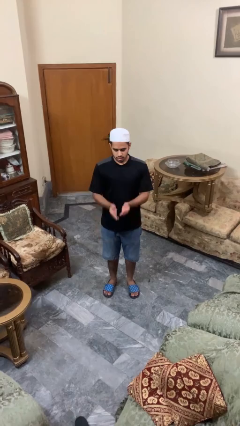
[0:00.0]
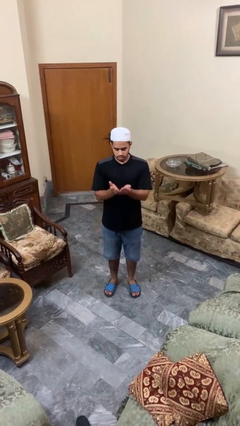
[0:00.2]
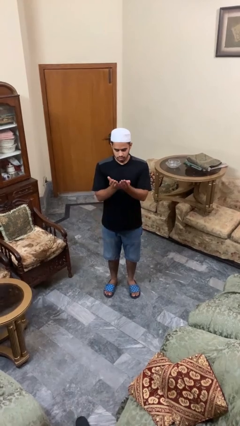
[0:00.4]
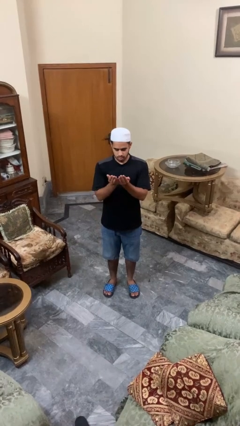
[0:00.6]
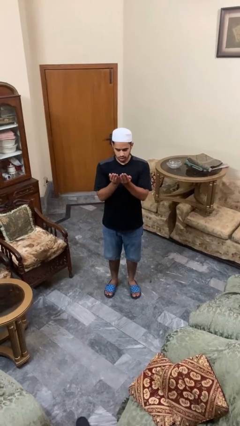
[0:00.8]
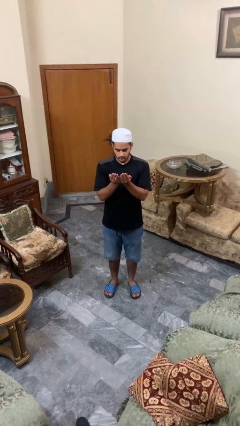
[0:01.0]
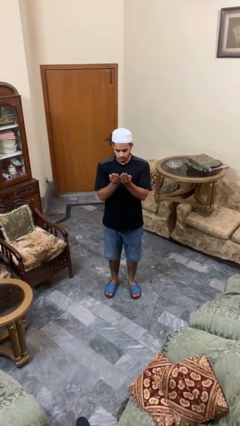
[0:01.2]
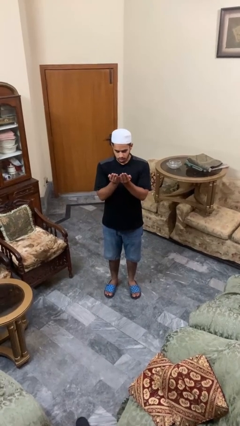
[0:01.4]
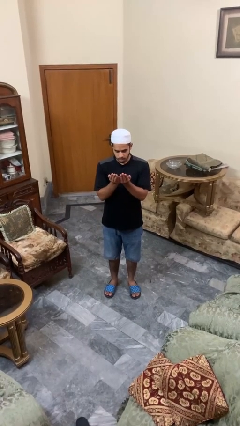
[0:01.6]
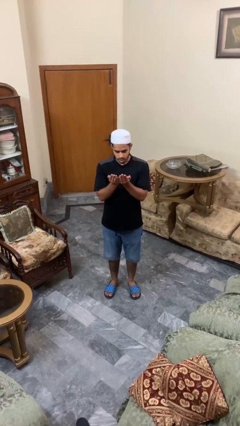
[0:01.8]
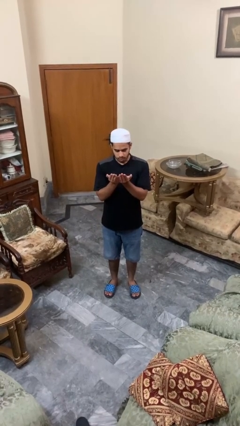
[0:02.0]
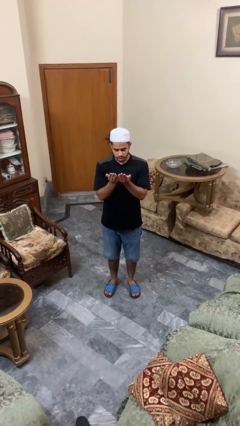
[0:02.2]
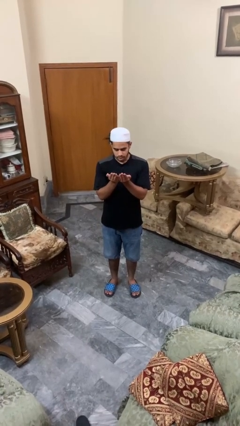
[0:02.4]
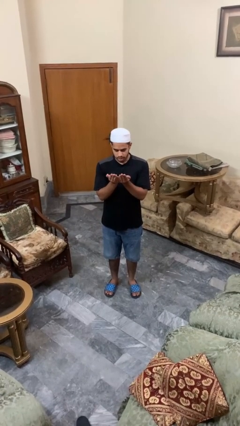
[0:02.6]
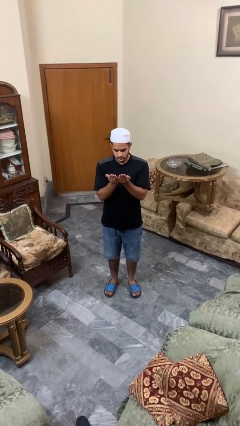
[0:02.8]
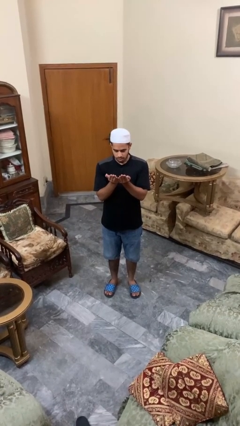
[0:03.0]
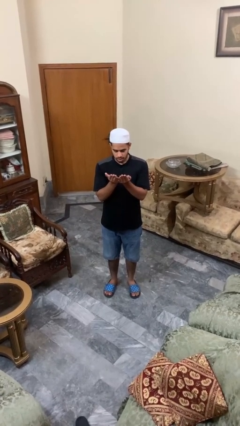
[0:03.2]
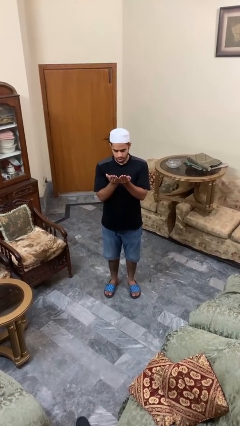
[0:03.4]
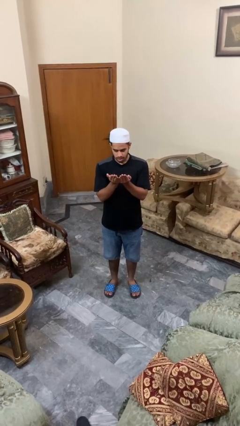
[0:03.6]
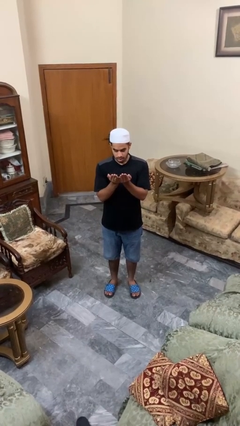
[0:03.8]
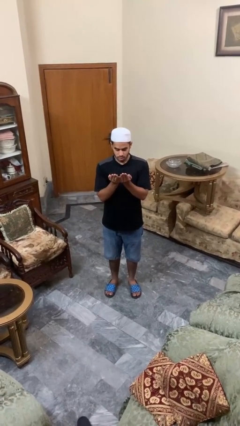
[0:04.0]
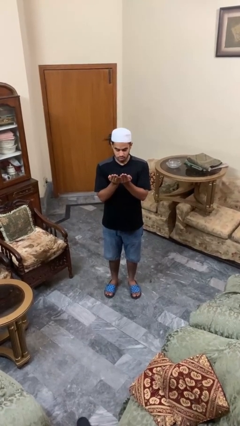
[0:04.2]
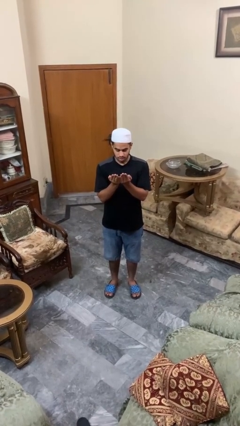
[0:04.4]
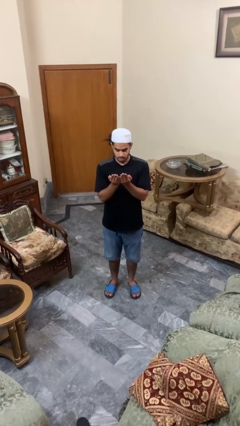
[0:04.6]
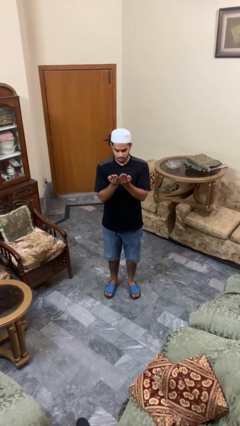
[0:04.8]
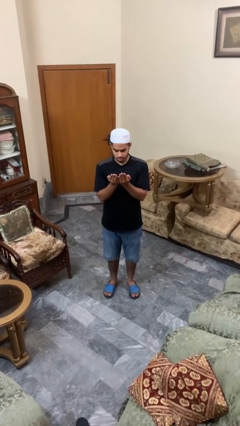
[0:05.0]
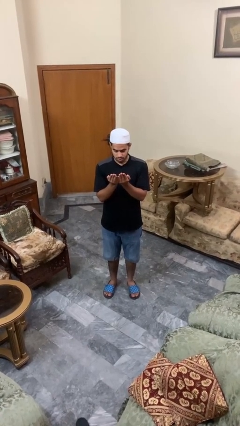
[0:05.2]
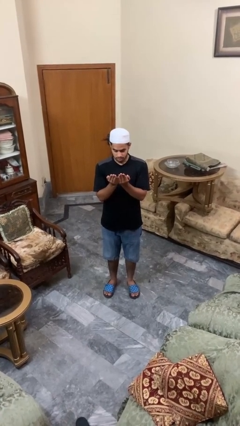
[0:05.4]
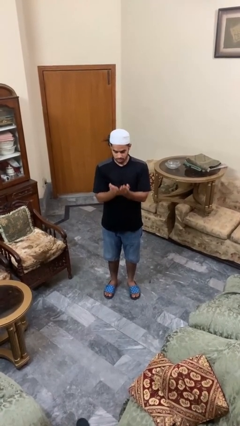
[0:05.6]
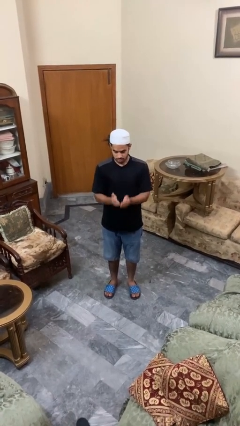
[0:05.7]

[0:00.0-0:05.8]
person prays

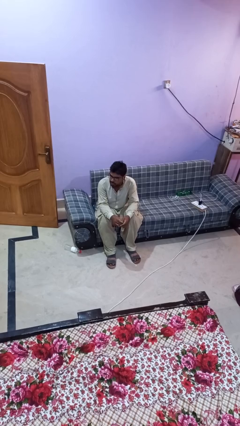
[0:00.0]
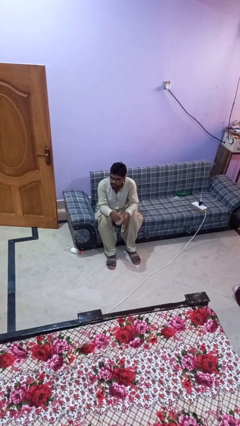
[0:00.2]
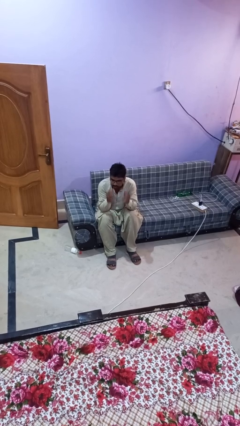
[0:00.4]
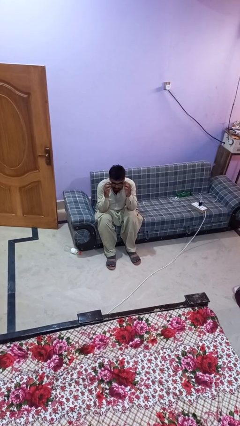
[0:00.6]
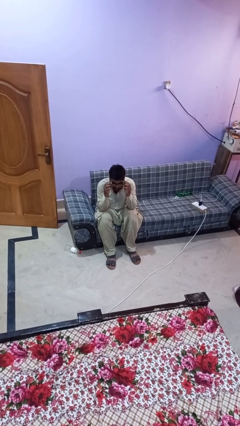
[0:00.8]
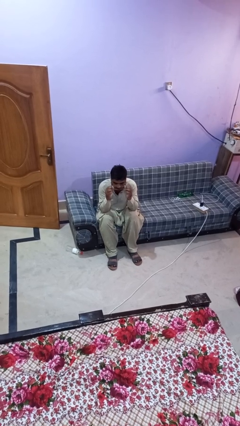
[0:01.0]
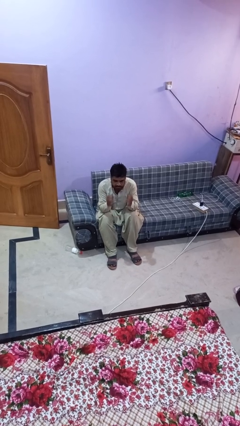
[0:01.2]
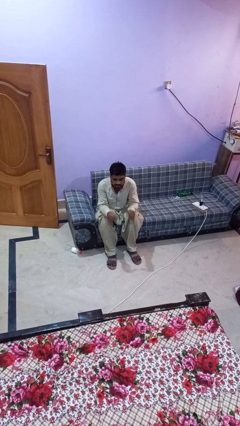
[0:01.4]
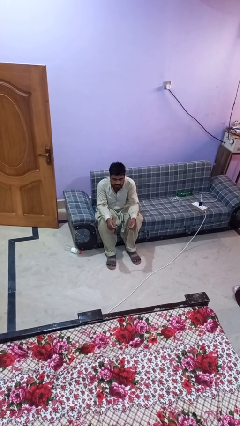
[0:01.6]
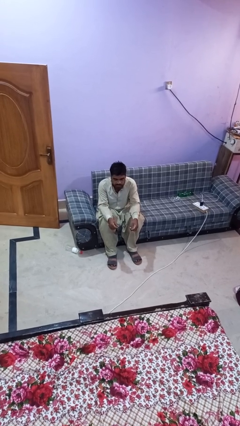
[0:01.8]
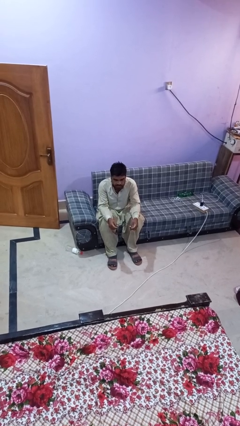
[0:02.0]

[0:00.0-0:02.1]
person takes off glasses

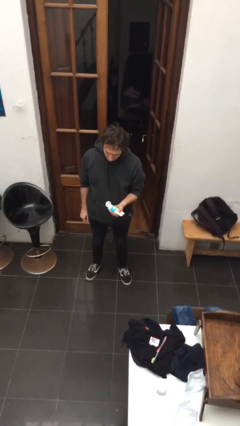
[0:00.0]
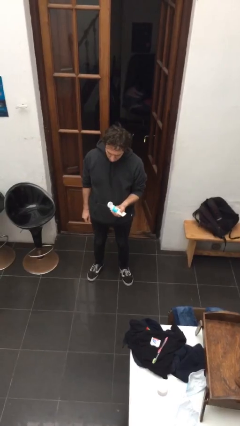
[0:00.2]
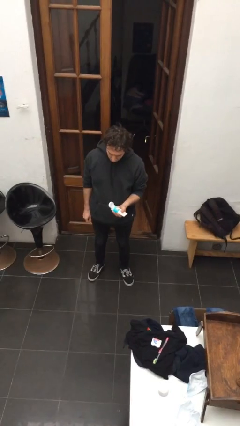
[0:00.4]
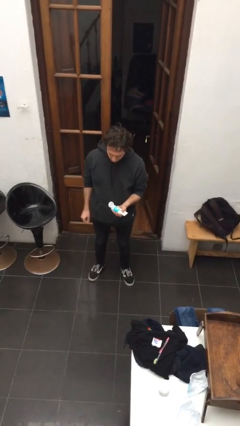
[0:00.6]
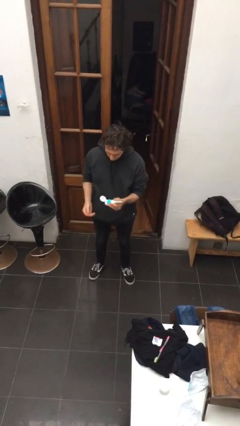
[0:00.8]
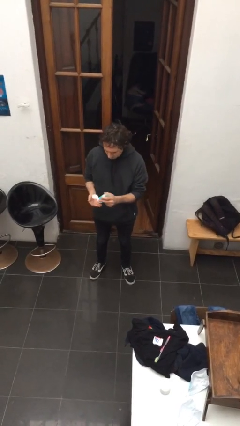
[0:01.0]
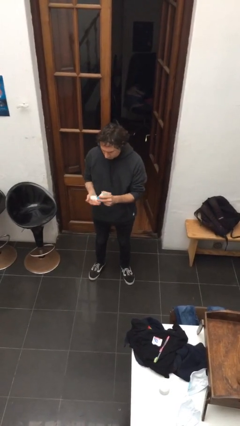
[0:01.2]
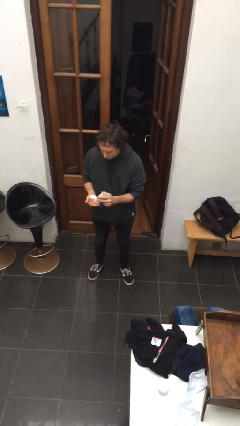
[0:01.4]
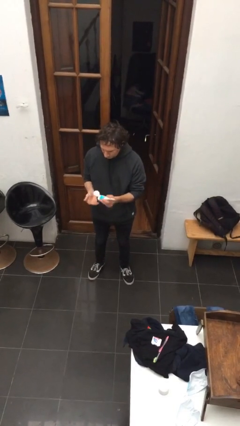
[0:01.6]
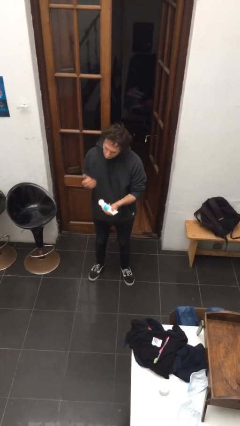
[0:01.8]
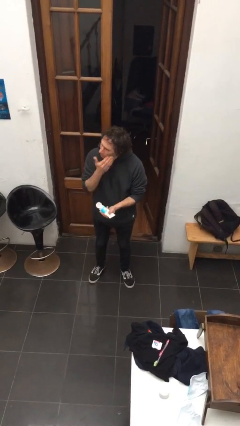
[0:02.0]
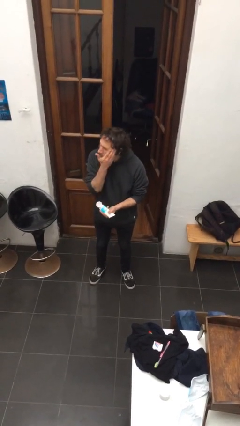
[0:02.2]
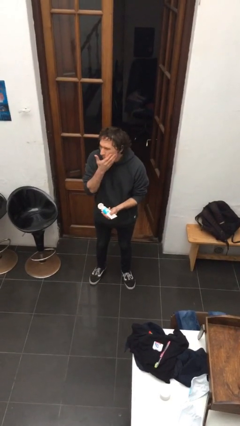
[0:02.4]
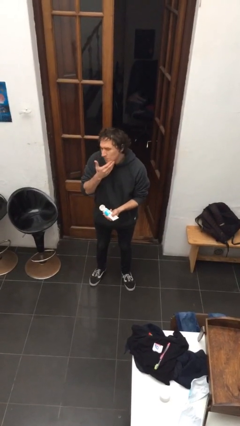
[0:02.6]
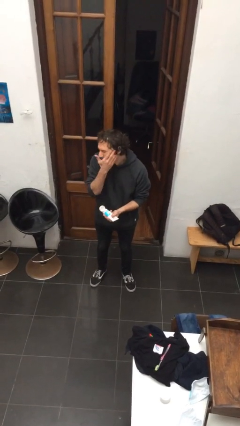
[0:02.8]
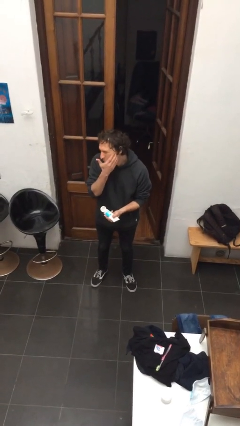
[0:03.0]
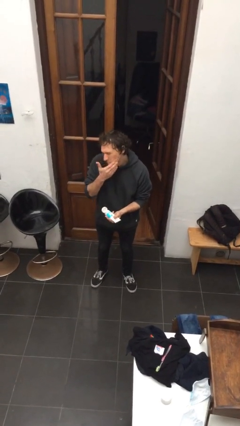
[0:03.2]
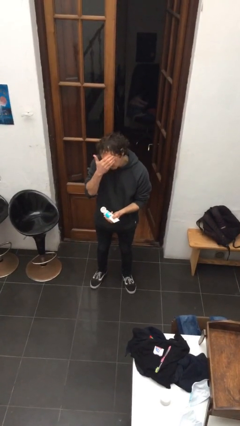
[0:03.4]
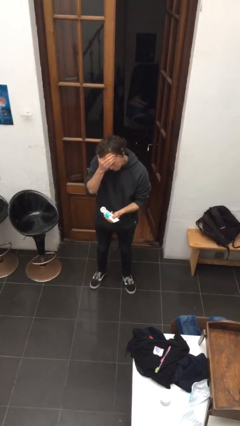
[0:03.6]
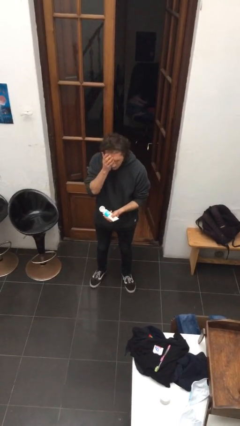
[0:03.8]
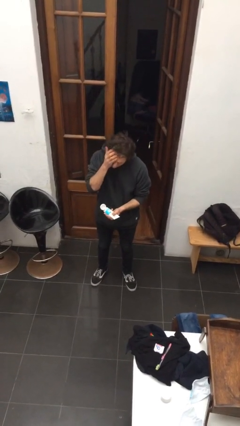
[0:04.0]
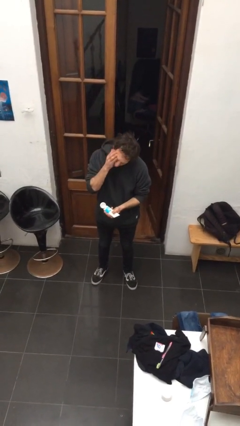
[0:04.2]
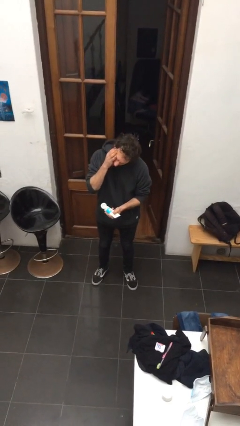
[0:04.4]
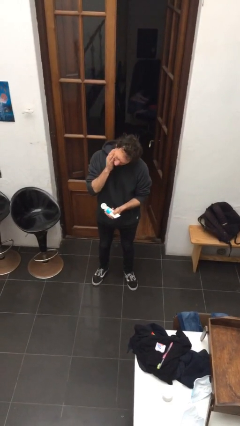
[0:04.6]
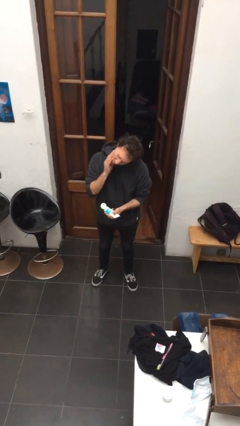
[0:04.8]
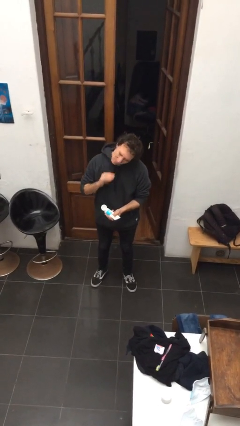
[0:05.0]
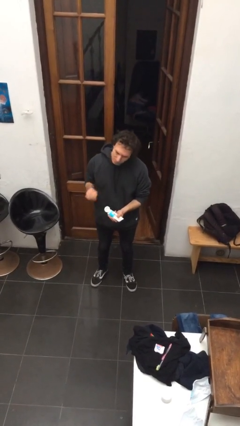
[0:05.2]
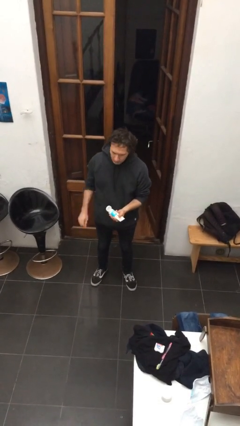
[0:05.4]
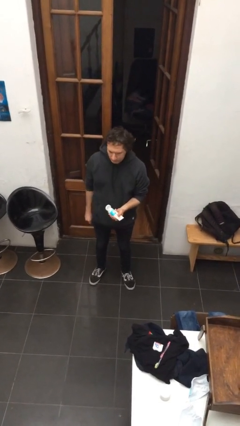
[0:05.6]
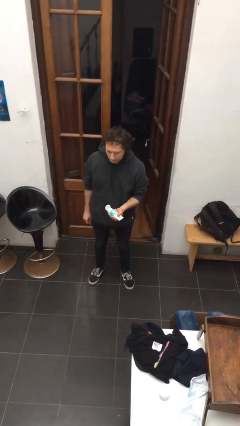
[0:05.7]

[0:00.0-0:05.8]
person applies facial moisturizer

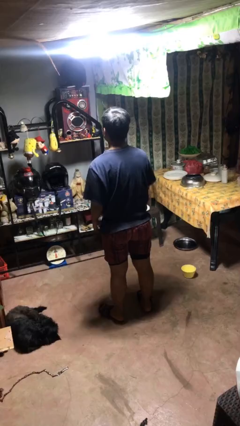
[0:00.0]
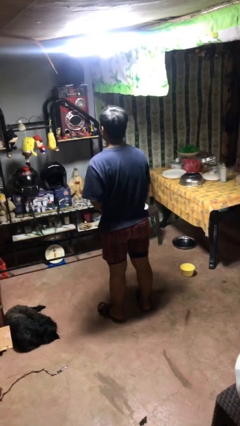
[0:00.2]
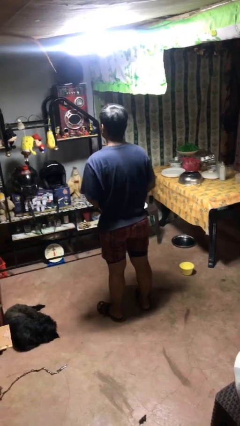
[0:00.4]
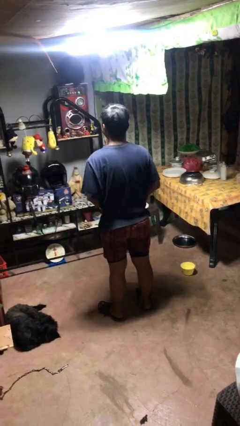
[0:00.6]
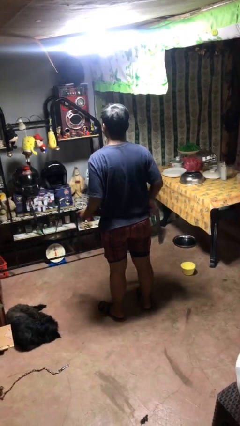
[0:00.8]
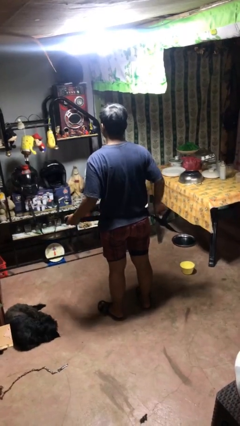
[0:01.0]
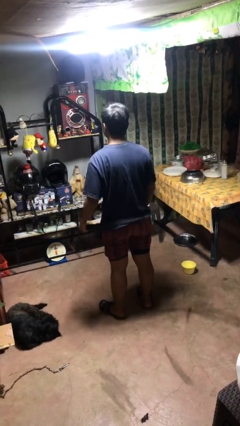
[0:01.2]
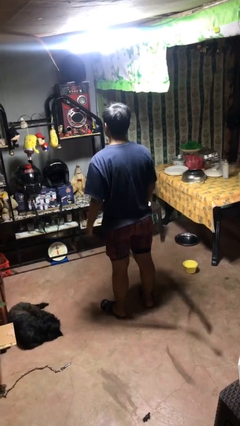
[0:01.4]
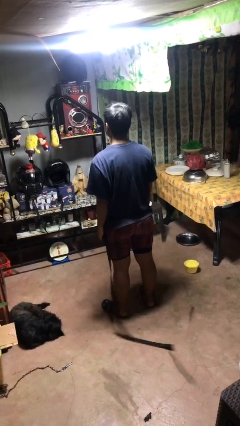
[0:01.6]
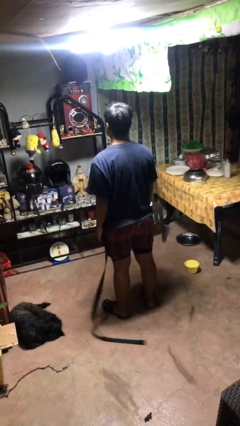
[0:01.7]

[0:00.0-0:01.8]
person takes off belt

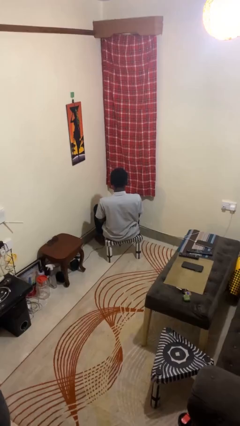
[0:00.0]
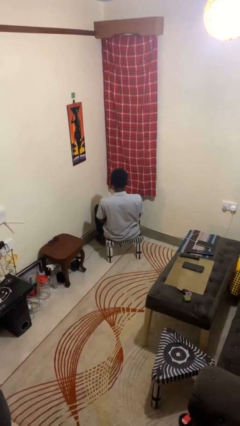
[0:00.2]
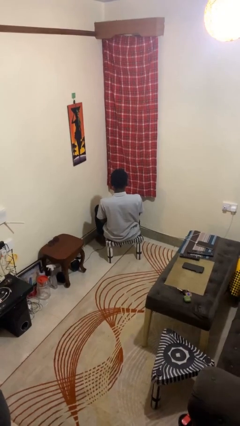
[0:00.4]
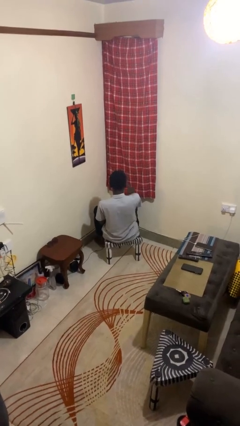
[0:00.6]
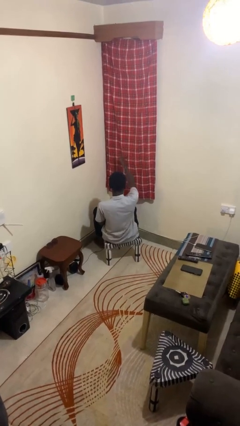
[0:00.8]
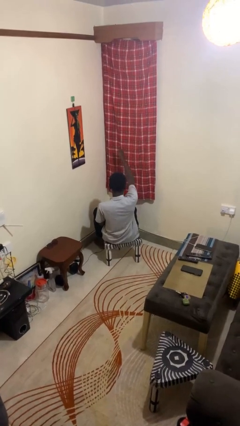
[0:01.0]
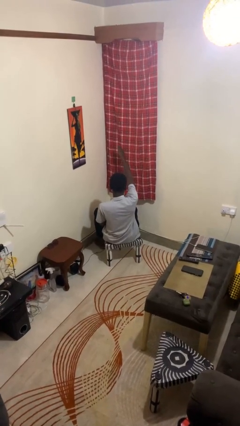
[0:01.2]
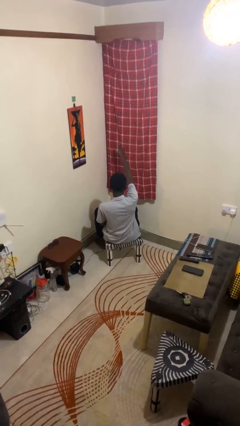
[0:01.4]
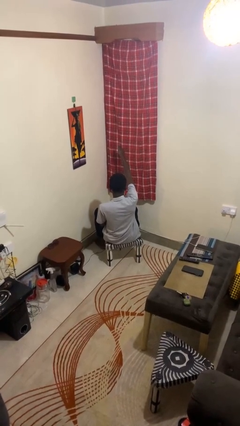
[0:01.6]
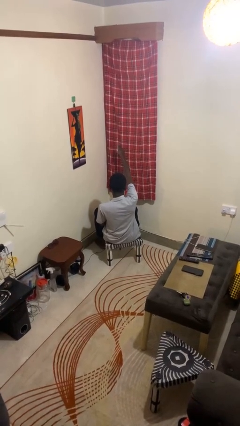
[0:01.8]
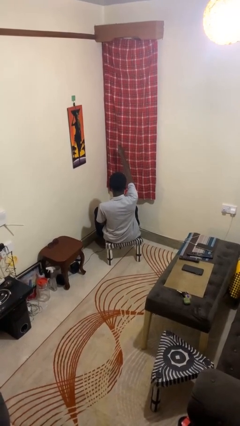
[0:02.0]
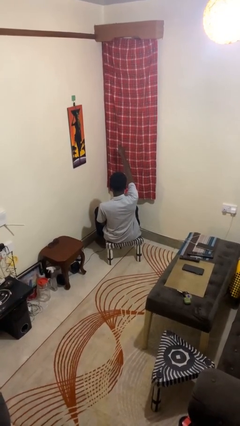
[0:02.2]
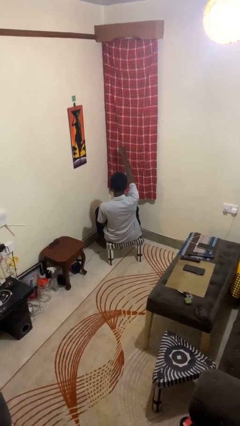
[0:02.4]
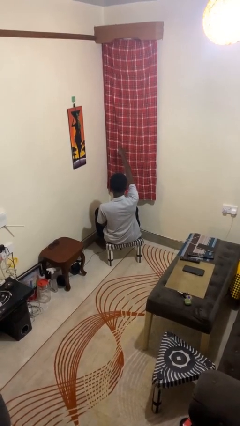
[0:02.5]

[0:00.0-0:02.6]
person gestures thumbs up
